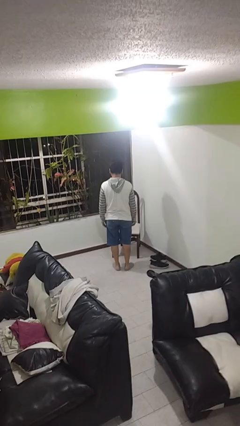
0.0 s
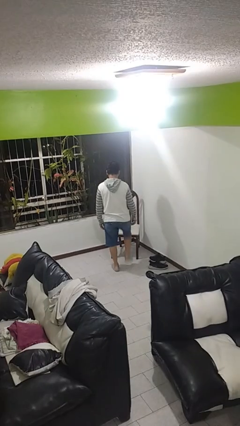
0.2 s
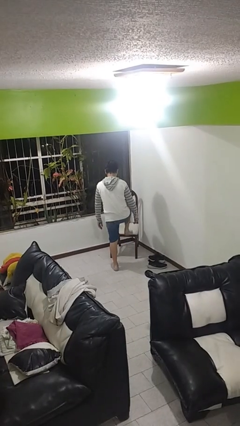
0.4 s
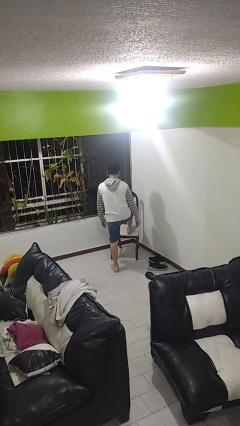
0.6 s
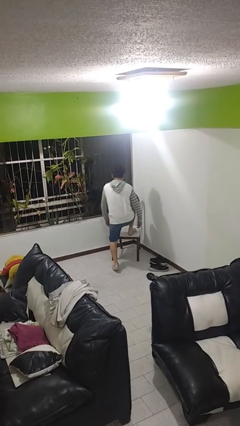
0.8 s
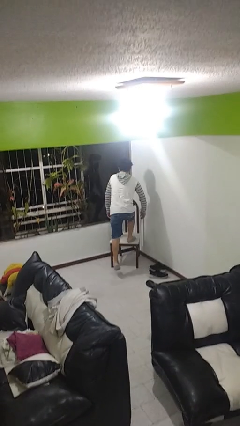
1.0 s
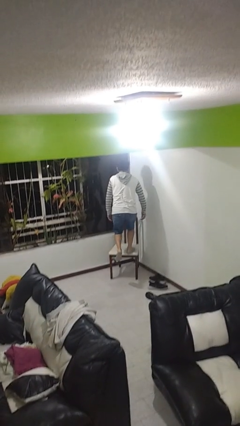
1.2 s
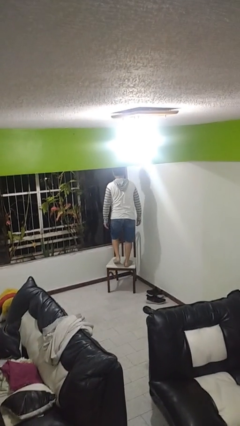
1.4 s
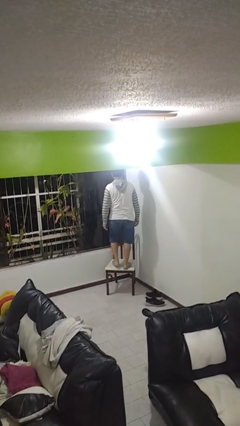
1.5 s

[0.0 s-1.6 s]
person climbs on chair

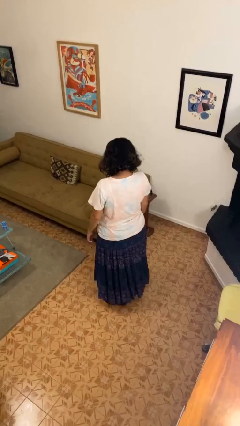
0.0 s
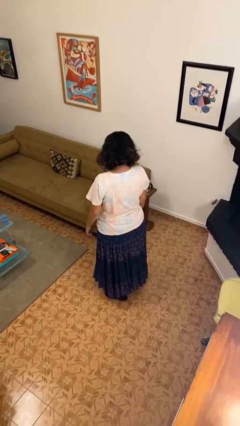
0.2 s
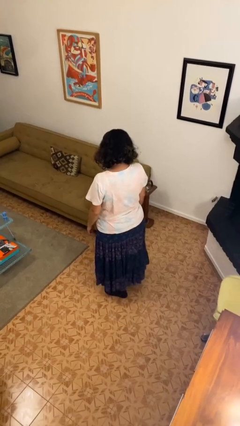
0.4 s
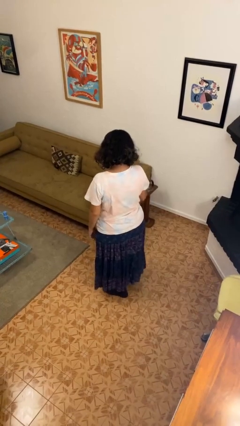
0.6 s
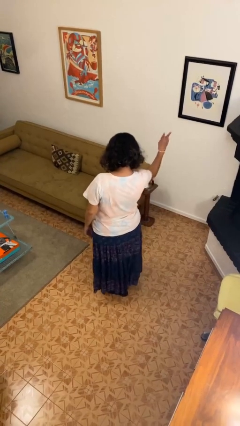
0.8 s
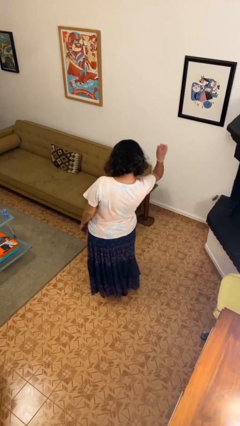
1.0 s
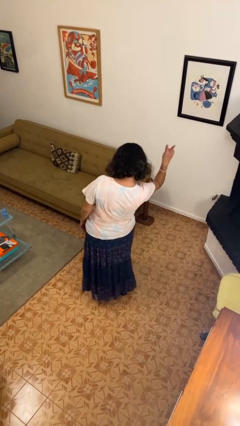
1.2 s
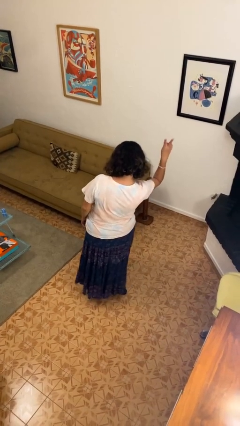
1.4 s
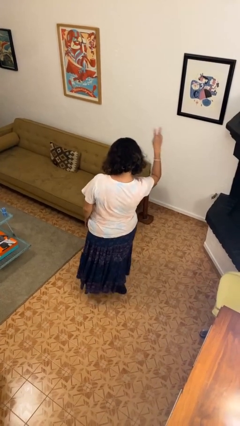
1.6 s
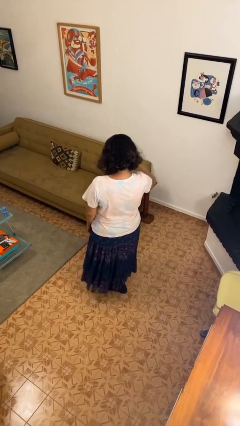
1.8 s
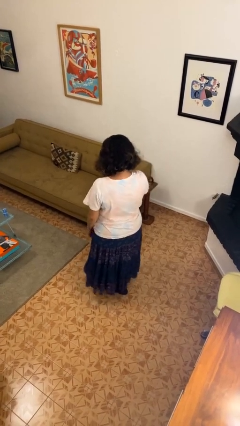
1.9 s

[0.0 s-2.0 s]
person gestures peace

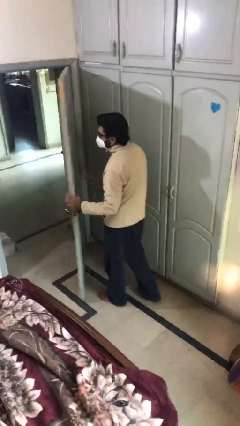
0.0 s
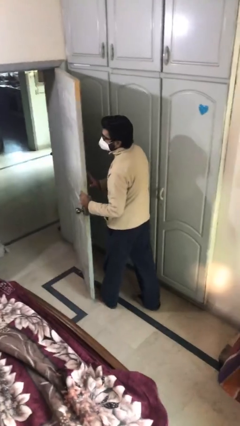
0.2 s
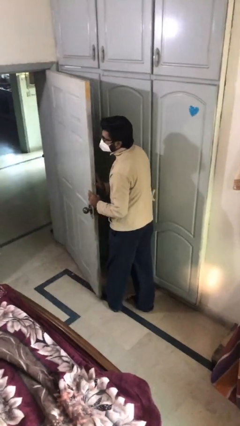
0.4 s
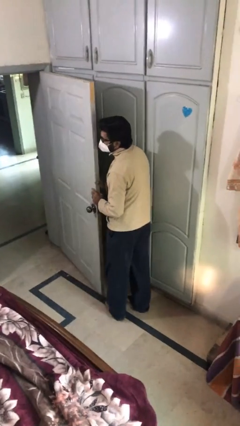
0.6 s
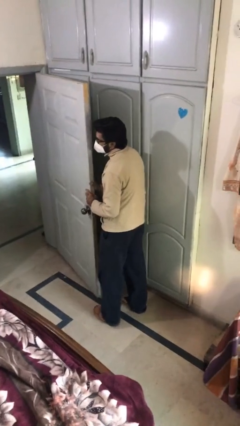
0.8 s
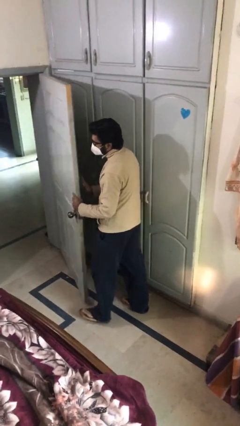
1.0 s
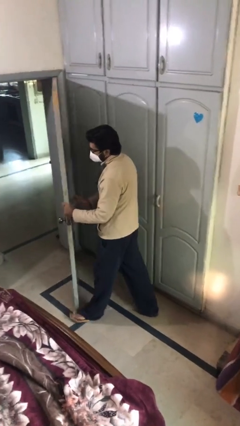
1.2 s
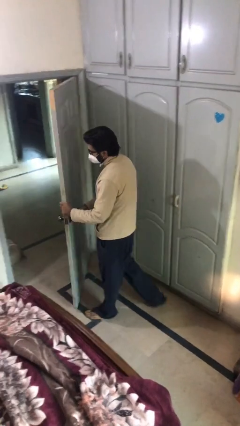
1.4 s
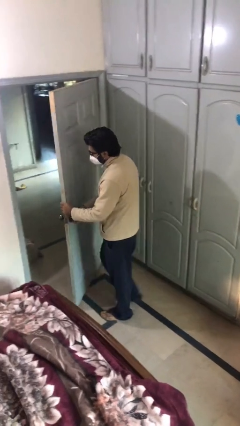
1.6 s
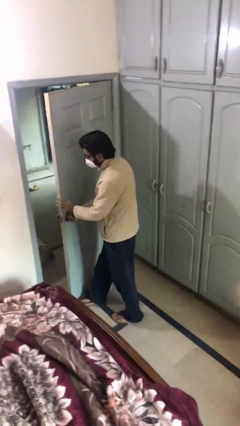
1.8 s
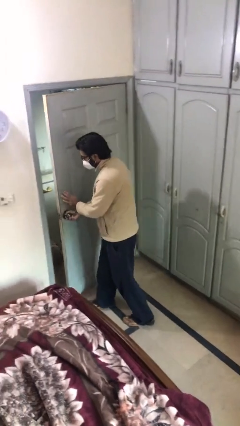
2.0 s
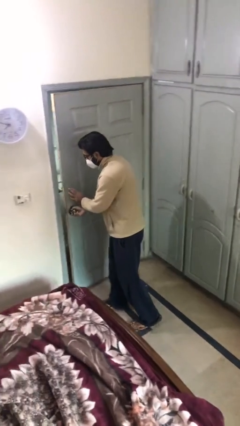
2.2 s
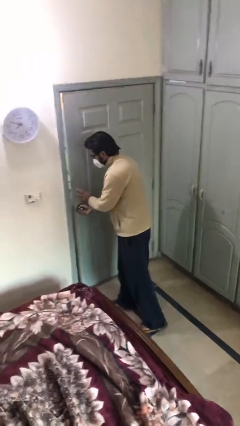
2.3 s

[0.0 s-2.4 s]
person closes facility door

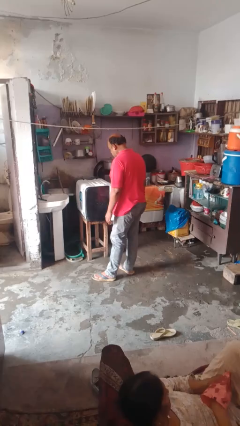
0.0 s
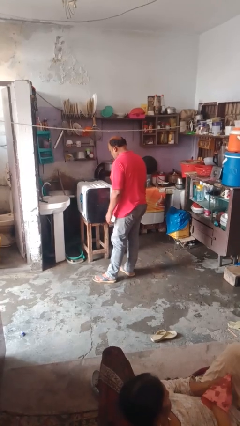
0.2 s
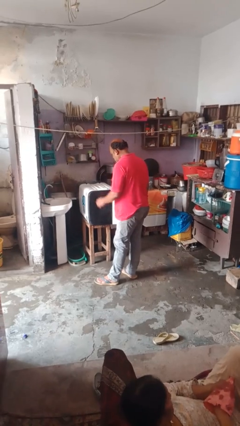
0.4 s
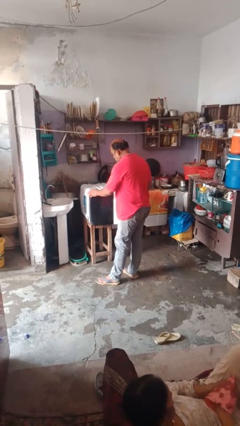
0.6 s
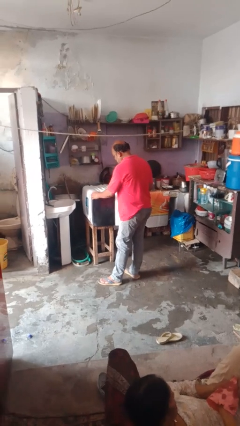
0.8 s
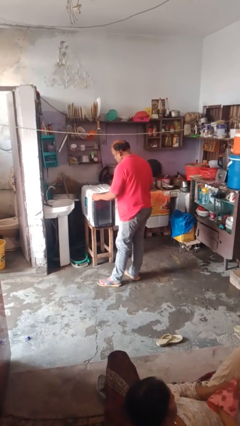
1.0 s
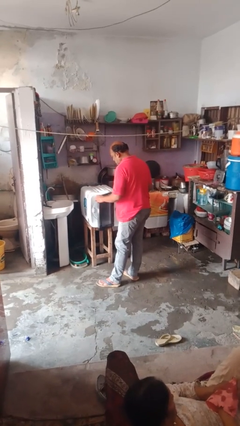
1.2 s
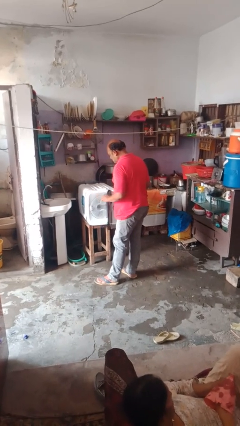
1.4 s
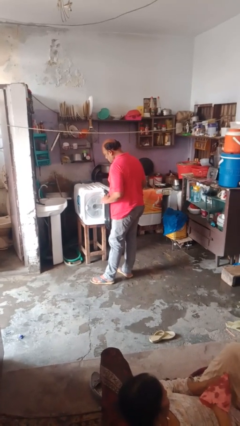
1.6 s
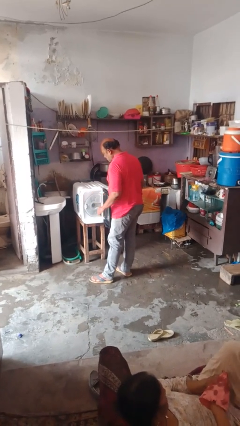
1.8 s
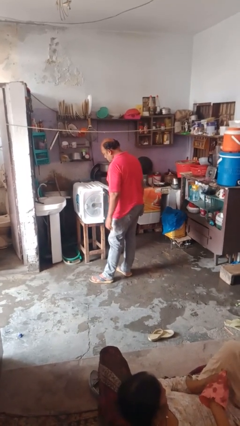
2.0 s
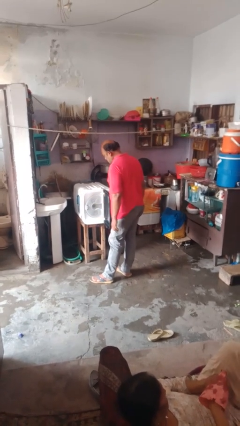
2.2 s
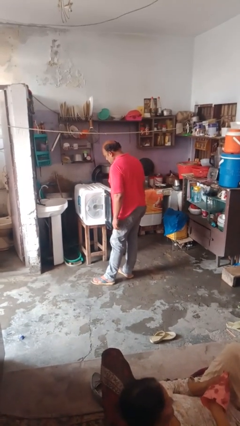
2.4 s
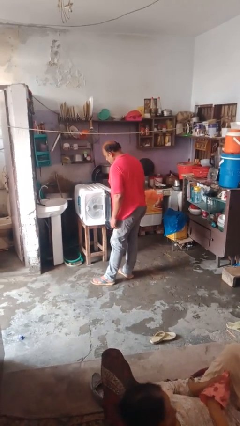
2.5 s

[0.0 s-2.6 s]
person opens dishwasher

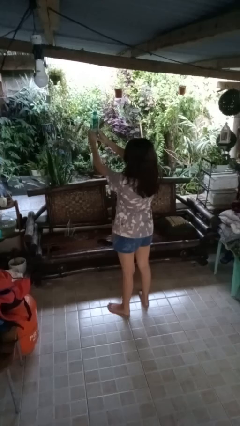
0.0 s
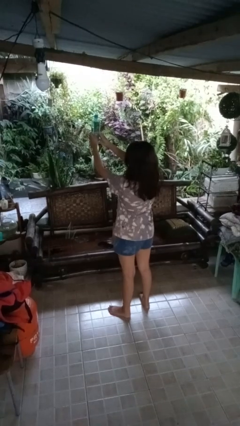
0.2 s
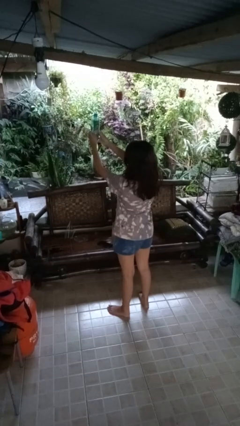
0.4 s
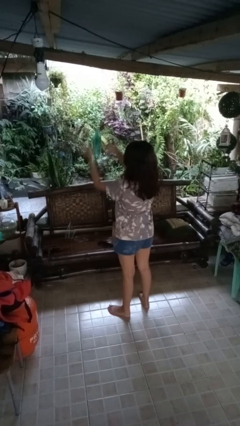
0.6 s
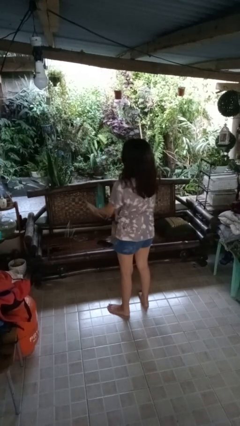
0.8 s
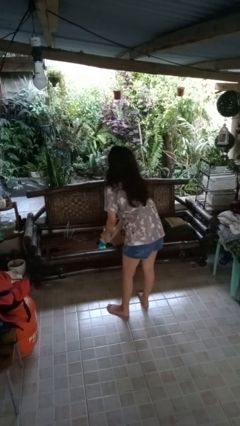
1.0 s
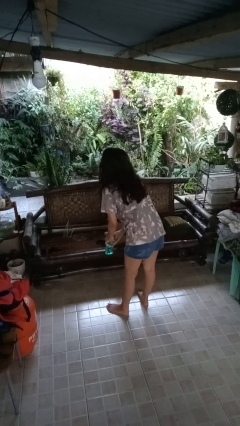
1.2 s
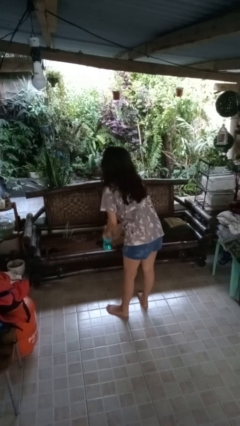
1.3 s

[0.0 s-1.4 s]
person drops object

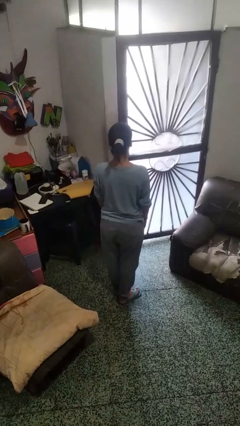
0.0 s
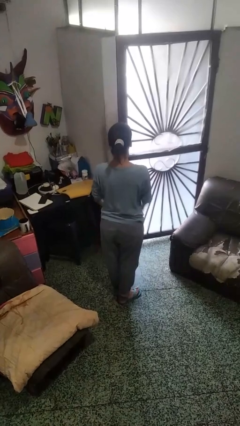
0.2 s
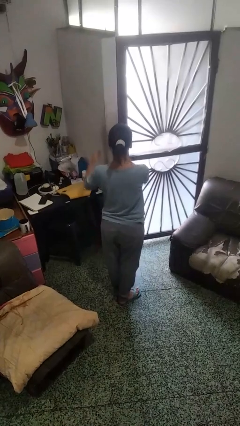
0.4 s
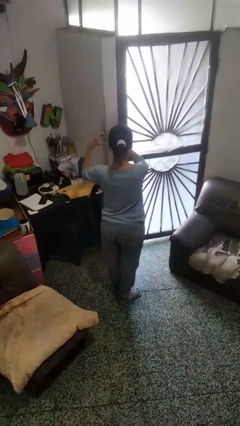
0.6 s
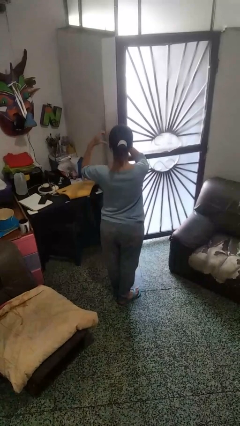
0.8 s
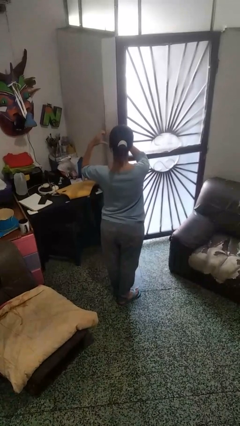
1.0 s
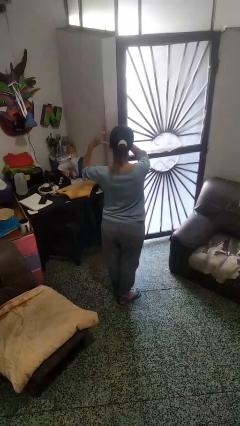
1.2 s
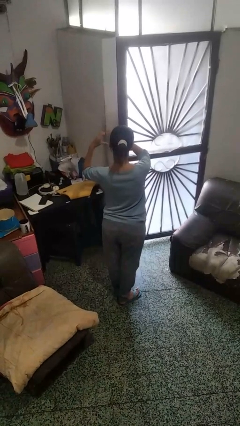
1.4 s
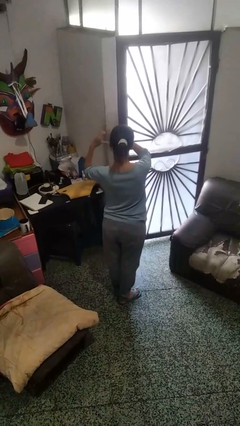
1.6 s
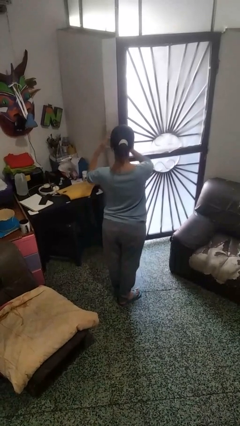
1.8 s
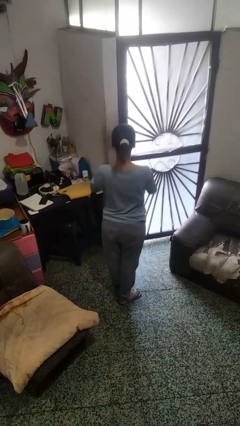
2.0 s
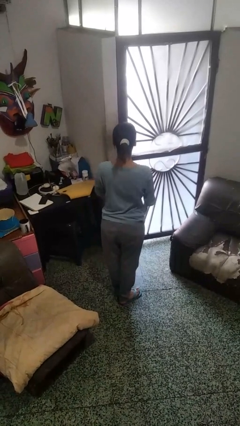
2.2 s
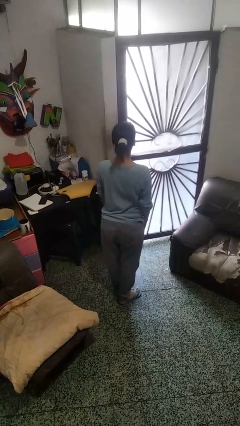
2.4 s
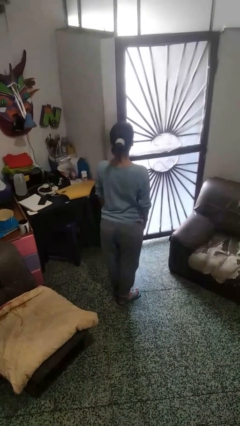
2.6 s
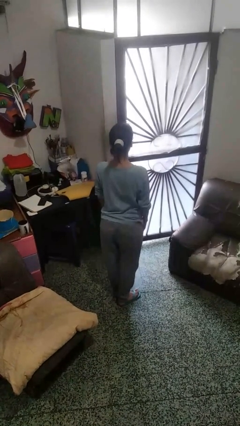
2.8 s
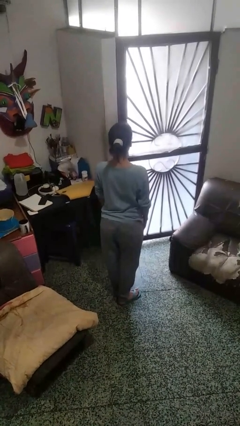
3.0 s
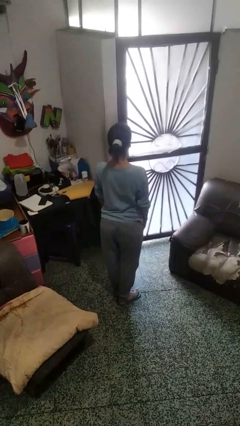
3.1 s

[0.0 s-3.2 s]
person gestures heart

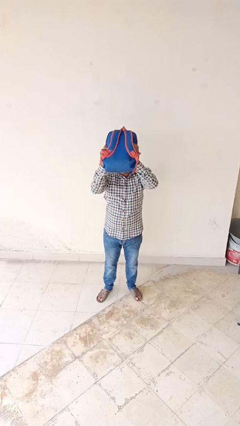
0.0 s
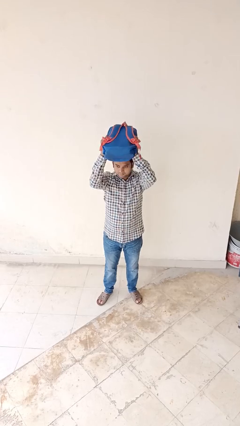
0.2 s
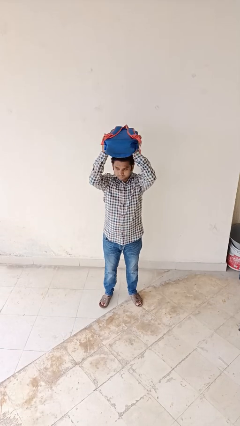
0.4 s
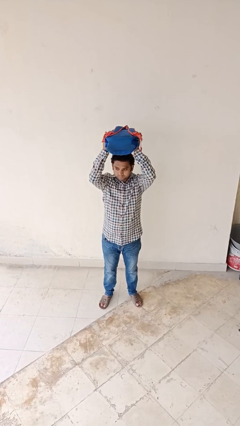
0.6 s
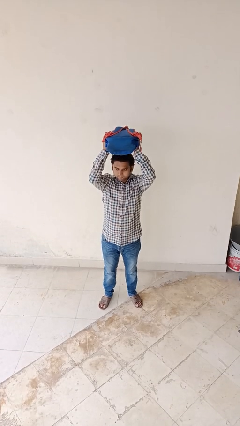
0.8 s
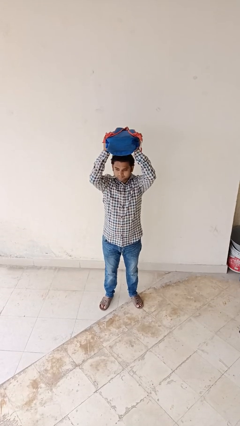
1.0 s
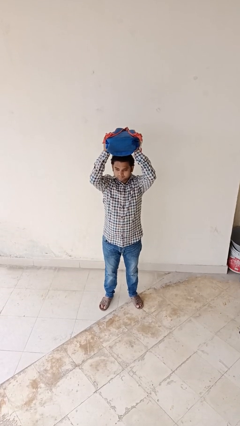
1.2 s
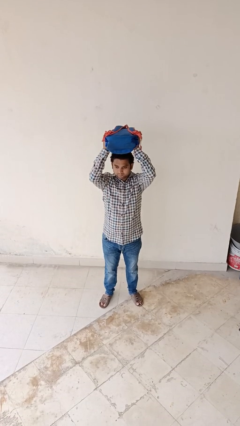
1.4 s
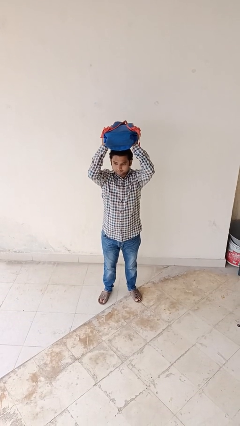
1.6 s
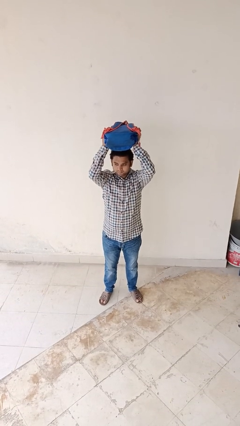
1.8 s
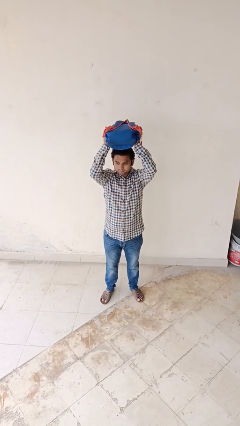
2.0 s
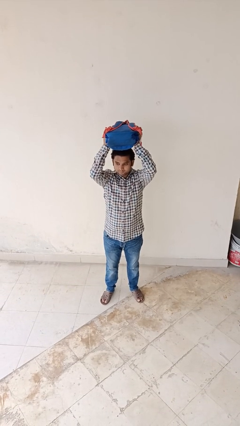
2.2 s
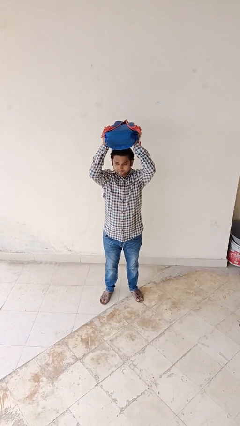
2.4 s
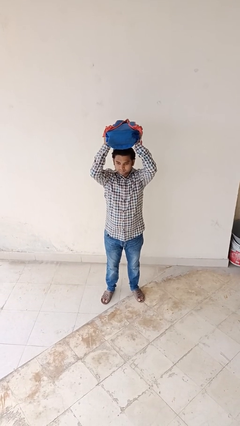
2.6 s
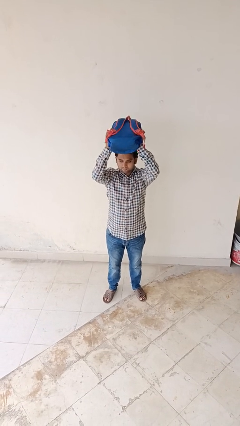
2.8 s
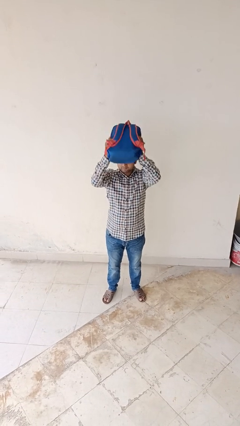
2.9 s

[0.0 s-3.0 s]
person holds object above head

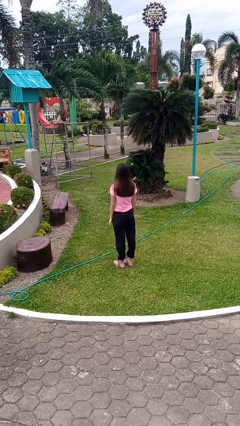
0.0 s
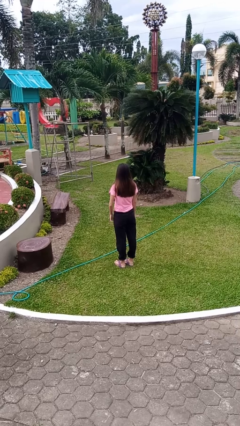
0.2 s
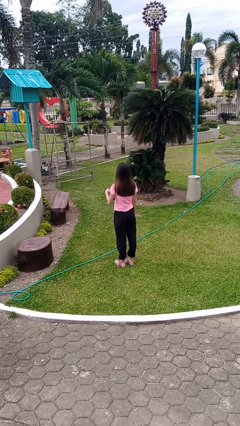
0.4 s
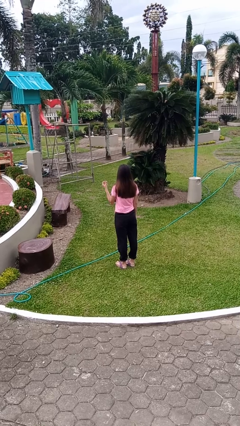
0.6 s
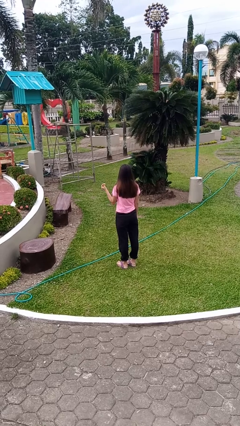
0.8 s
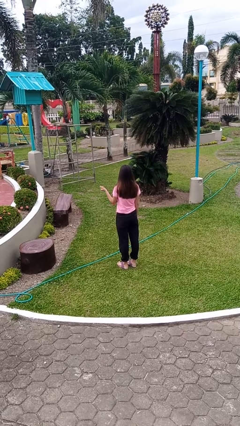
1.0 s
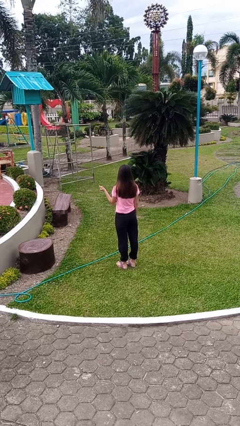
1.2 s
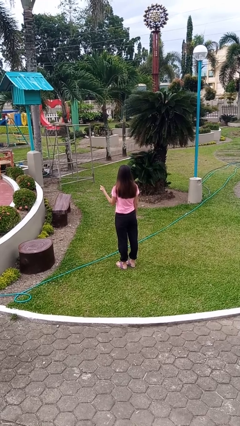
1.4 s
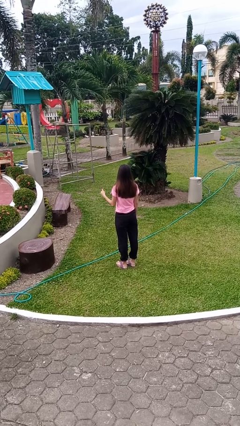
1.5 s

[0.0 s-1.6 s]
person snaps fingers
